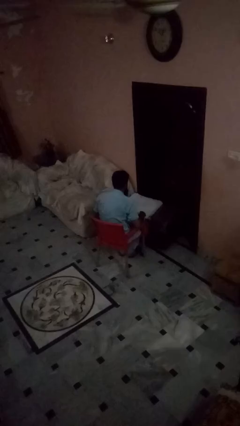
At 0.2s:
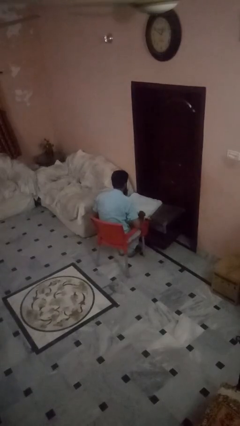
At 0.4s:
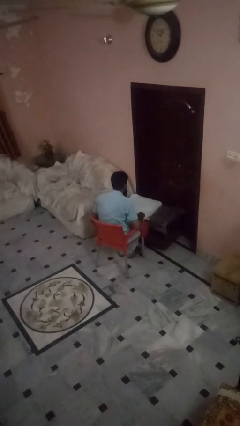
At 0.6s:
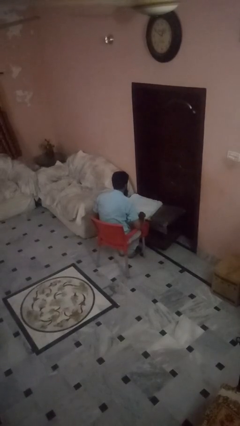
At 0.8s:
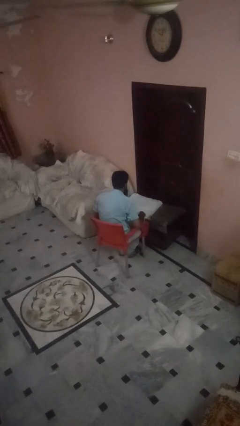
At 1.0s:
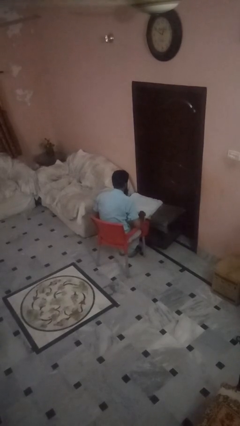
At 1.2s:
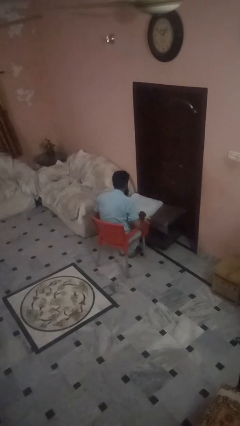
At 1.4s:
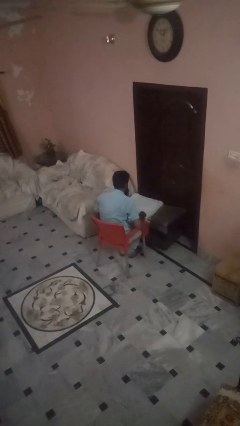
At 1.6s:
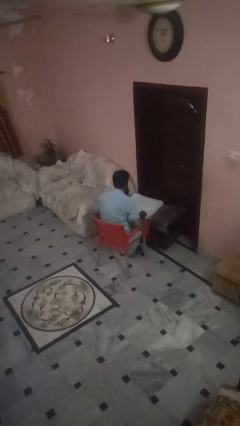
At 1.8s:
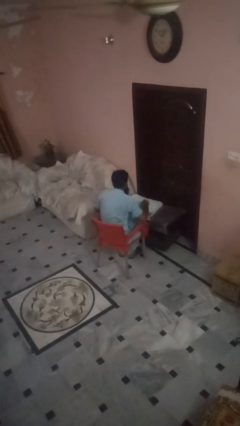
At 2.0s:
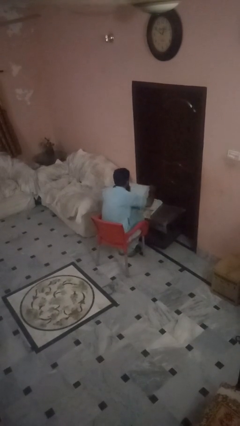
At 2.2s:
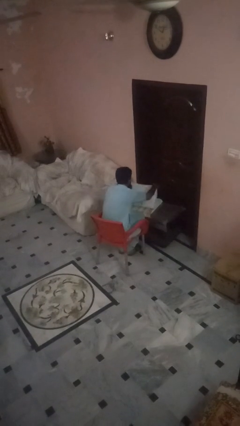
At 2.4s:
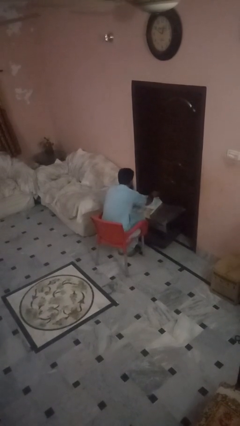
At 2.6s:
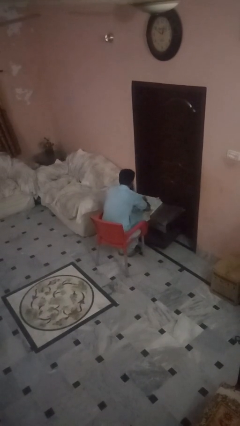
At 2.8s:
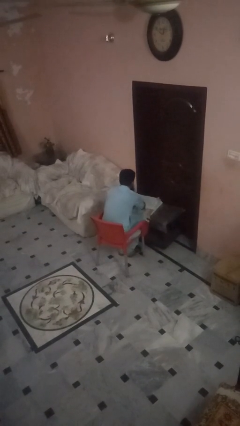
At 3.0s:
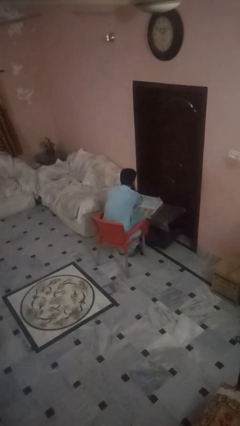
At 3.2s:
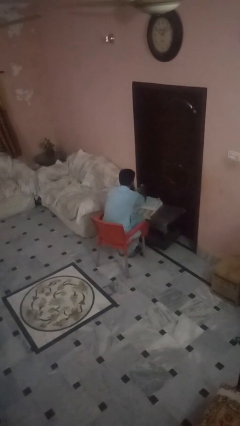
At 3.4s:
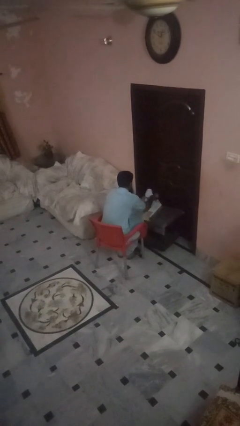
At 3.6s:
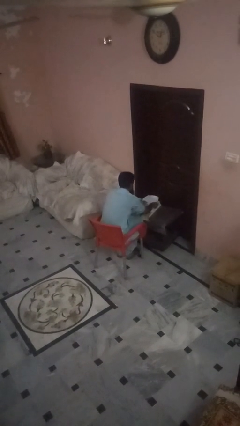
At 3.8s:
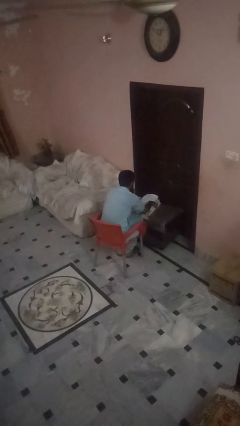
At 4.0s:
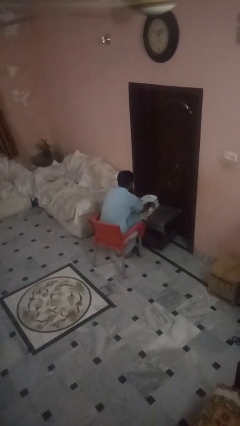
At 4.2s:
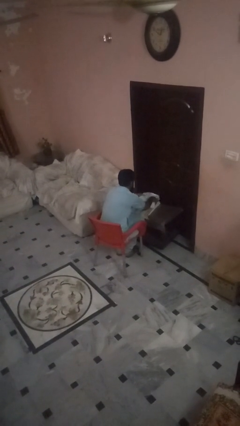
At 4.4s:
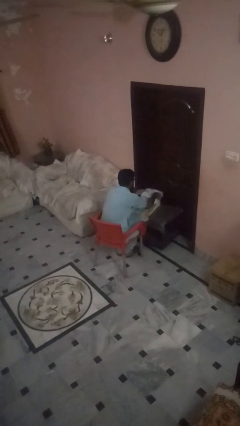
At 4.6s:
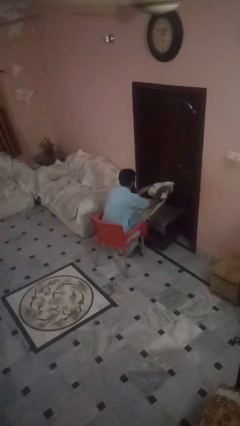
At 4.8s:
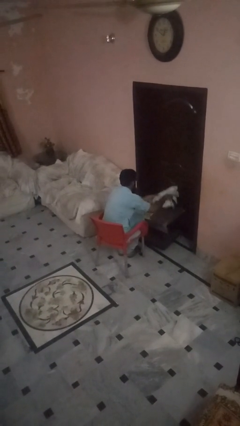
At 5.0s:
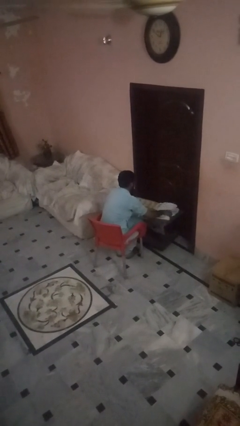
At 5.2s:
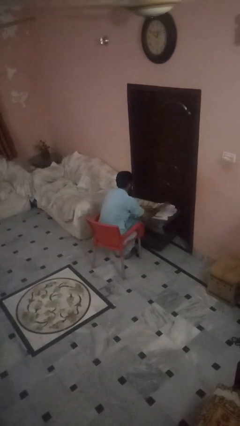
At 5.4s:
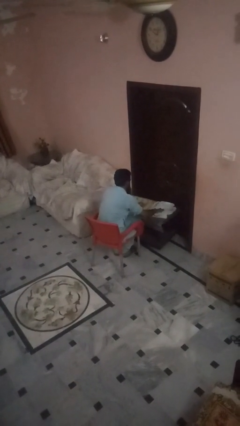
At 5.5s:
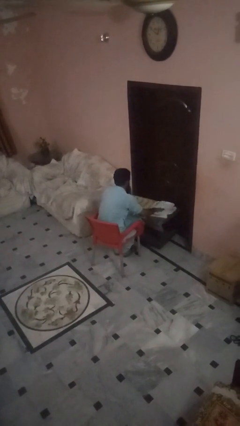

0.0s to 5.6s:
person folds towel

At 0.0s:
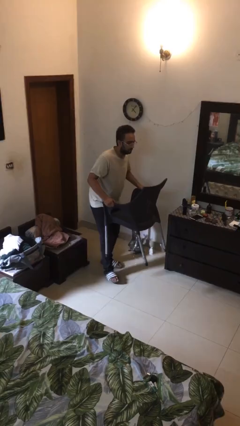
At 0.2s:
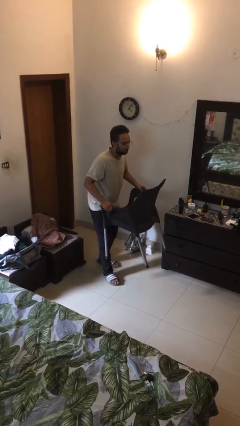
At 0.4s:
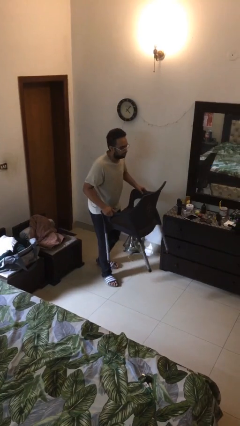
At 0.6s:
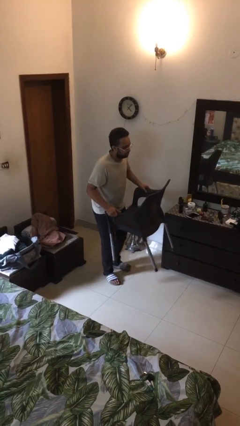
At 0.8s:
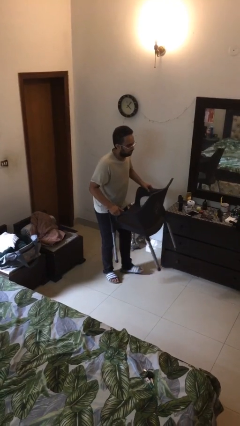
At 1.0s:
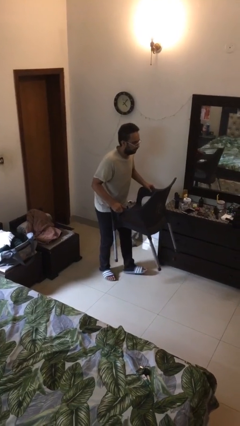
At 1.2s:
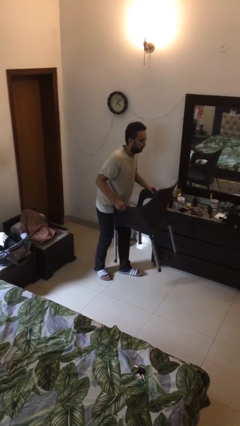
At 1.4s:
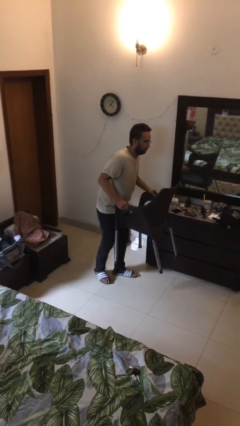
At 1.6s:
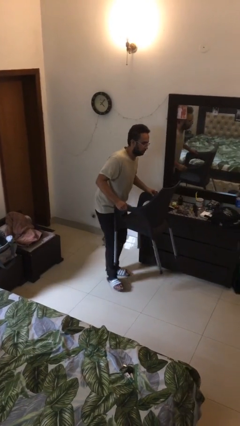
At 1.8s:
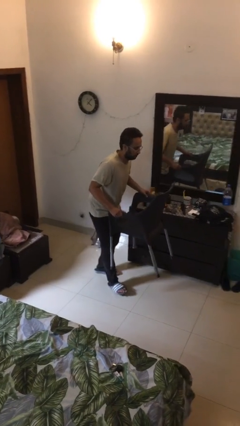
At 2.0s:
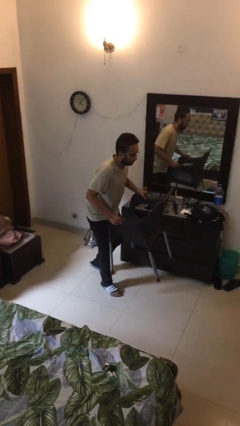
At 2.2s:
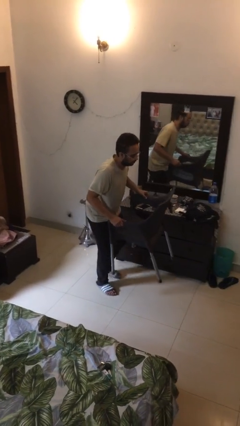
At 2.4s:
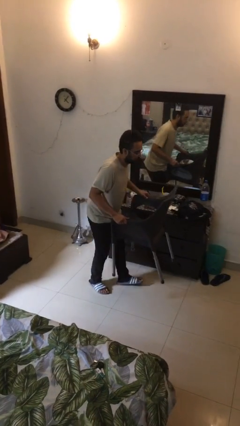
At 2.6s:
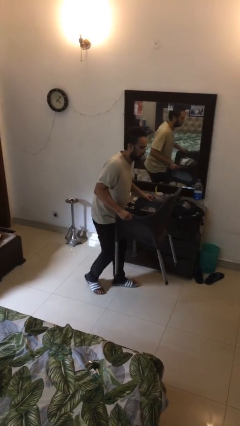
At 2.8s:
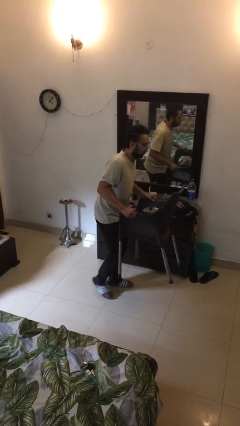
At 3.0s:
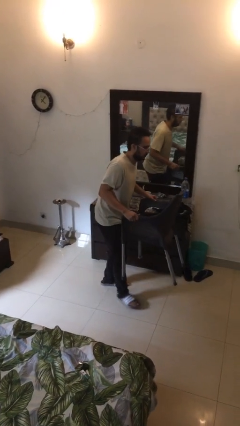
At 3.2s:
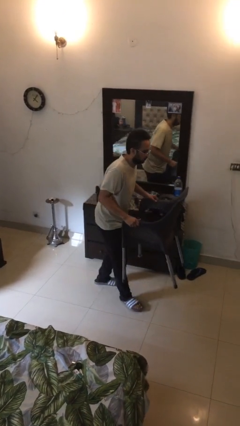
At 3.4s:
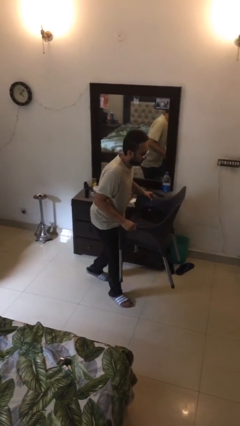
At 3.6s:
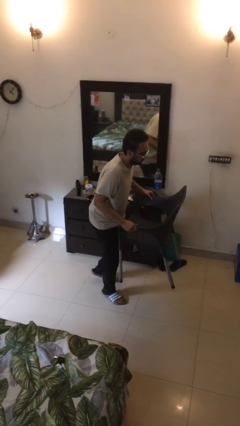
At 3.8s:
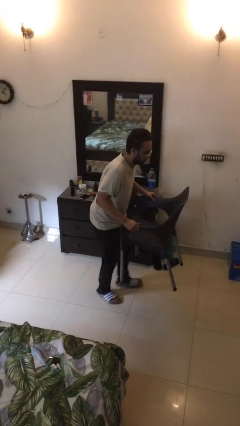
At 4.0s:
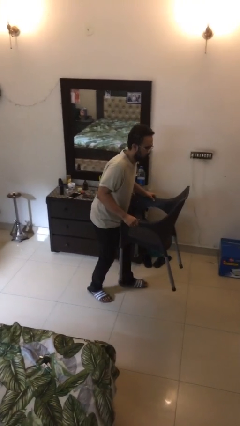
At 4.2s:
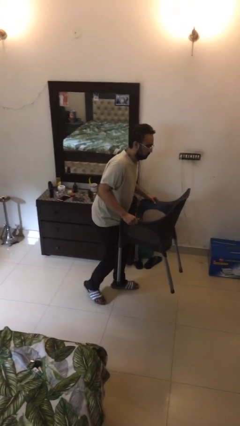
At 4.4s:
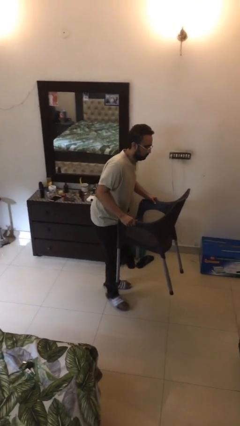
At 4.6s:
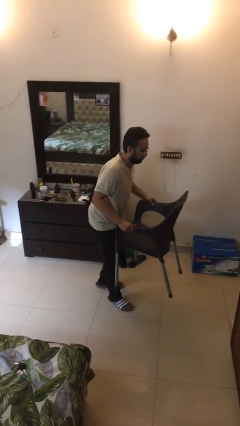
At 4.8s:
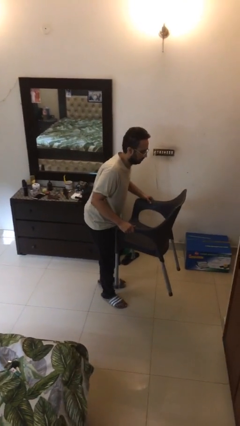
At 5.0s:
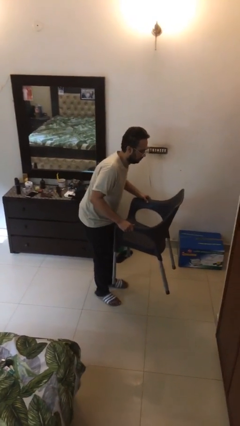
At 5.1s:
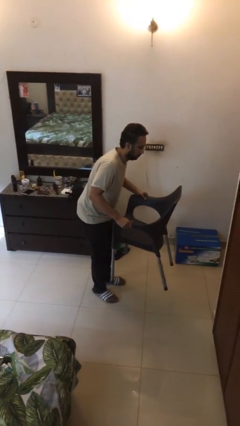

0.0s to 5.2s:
person carries heavy object

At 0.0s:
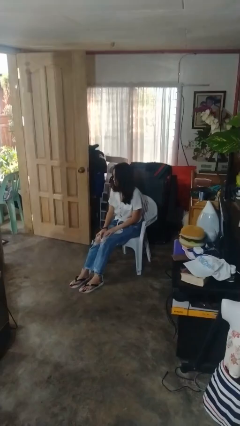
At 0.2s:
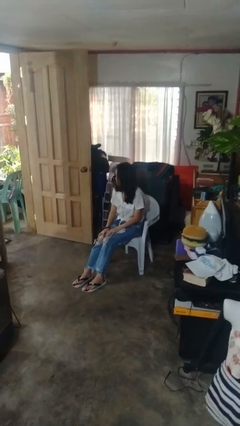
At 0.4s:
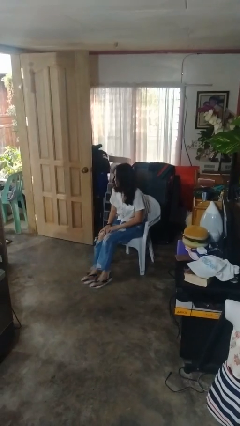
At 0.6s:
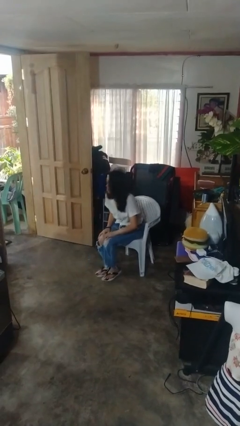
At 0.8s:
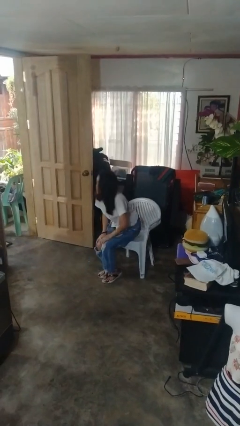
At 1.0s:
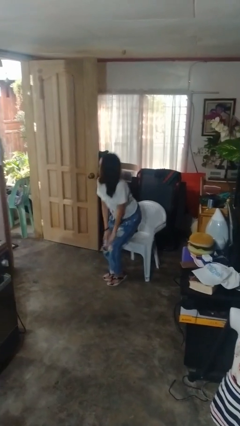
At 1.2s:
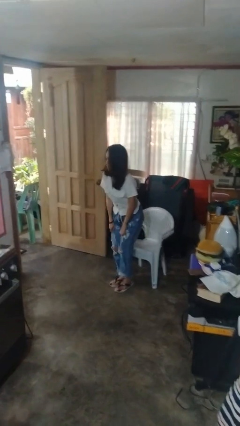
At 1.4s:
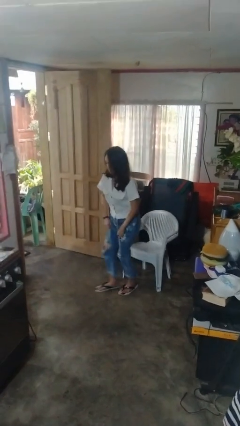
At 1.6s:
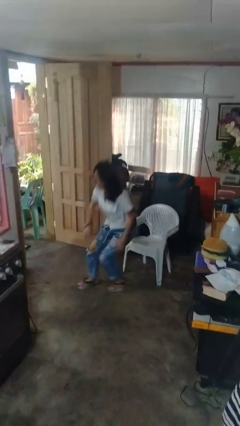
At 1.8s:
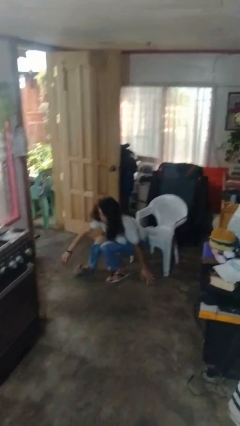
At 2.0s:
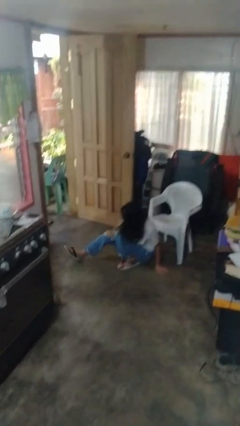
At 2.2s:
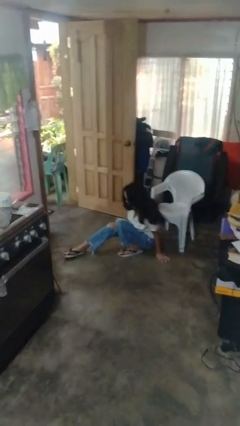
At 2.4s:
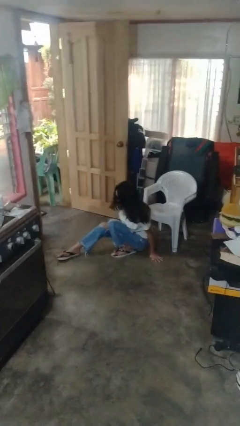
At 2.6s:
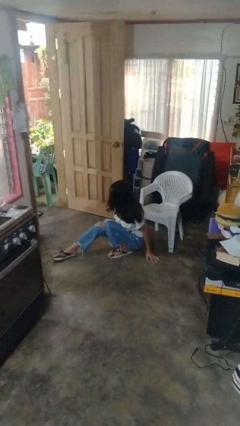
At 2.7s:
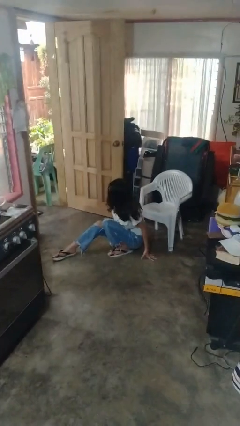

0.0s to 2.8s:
person falls from chair

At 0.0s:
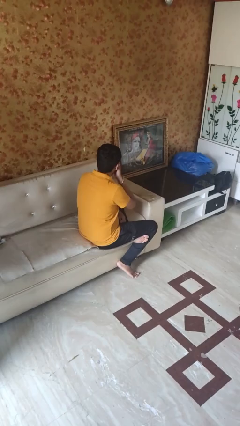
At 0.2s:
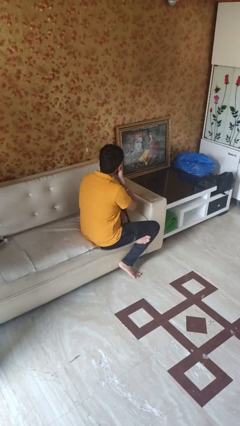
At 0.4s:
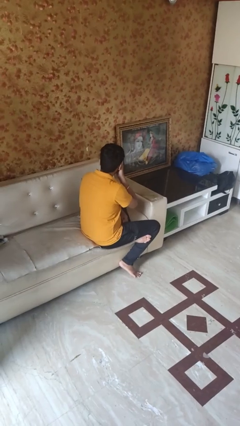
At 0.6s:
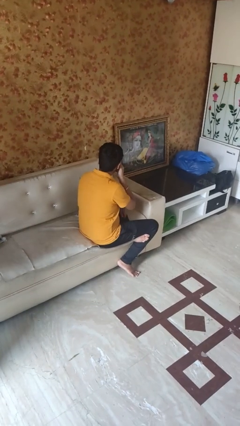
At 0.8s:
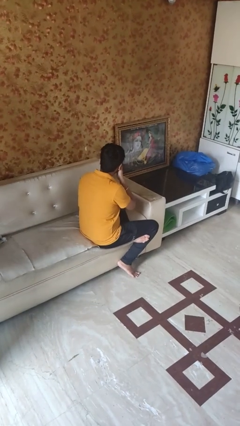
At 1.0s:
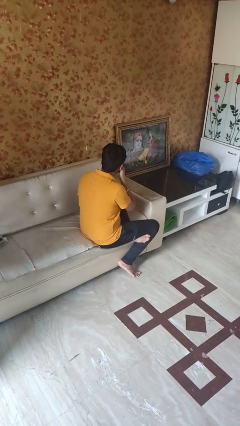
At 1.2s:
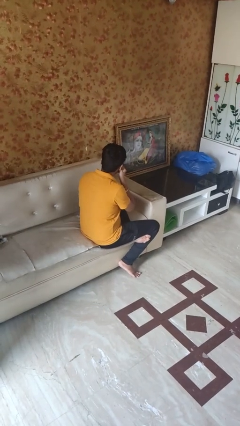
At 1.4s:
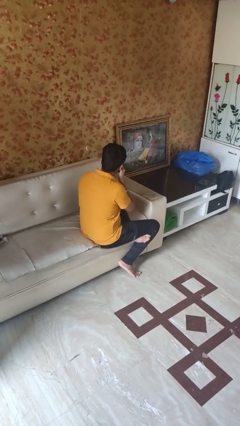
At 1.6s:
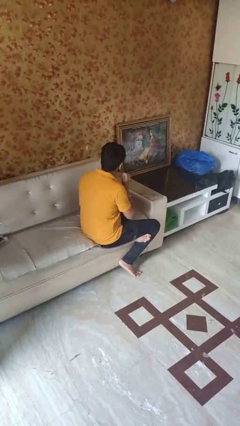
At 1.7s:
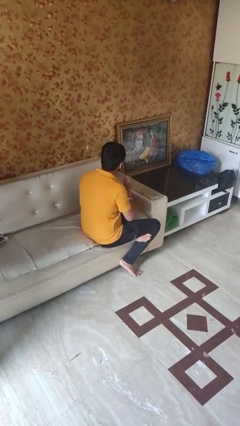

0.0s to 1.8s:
person rubs eyes

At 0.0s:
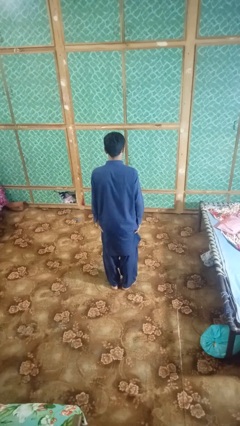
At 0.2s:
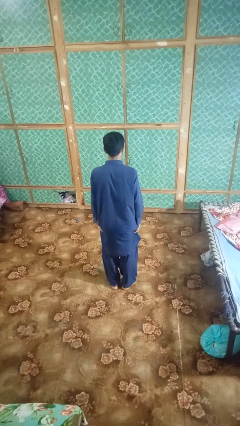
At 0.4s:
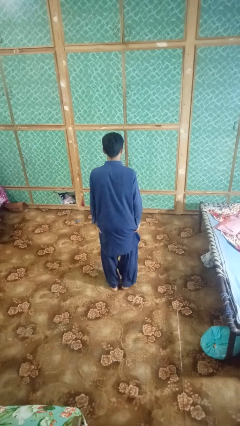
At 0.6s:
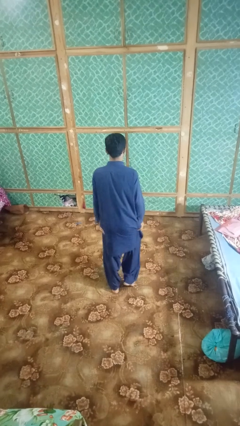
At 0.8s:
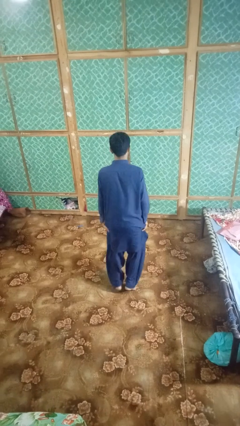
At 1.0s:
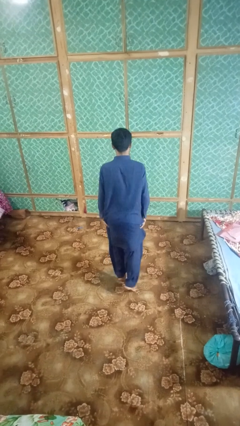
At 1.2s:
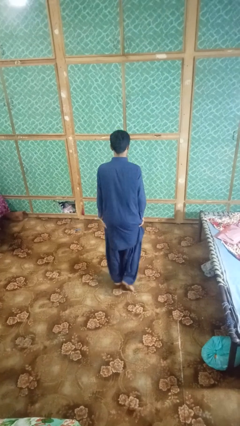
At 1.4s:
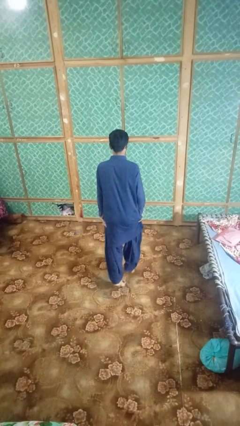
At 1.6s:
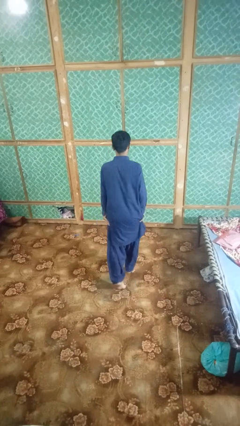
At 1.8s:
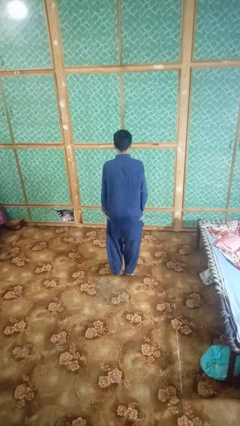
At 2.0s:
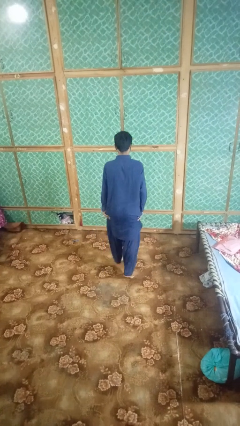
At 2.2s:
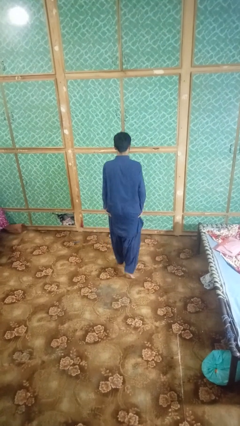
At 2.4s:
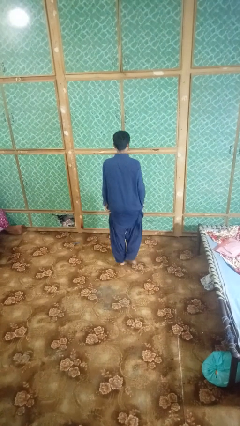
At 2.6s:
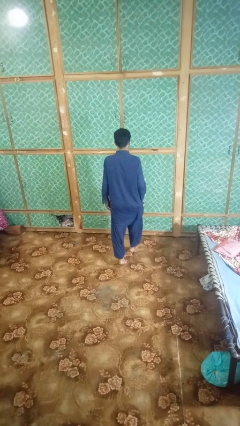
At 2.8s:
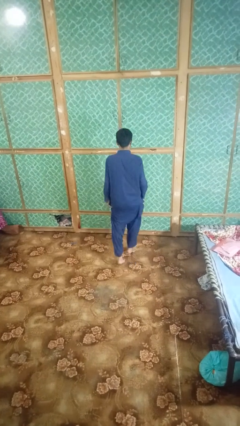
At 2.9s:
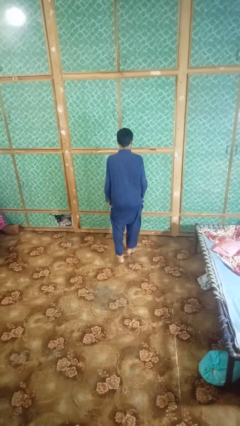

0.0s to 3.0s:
person walks tiptoe
